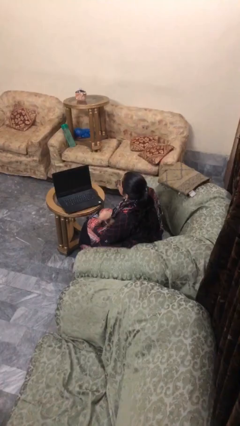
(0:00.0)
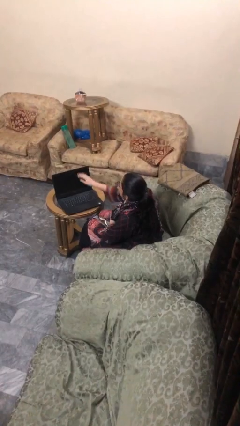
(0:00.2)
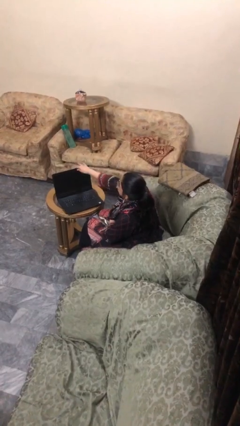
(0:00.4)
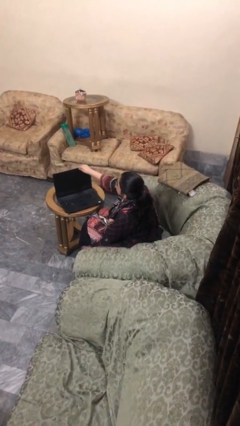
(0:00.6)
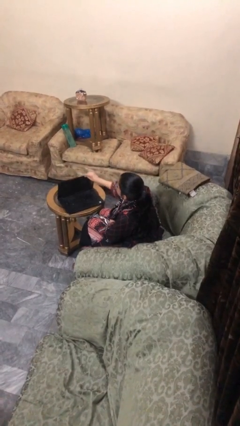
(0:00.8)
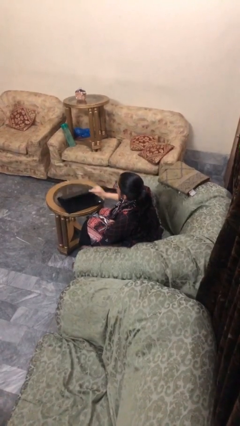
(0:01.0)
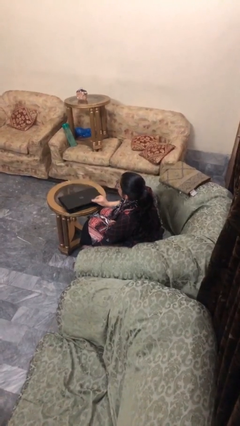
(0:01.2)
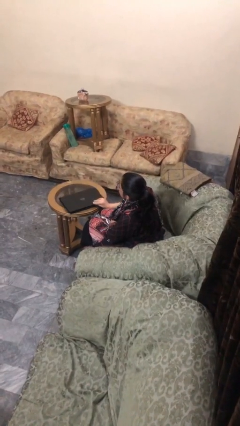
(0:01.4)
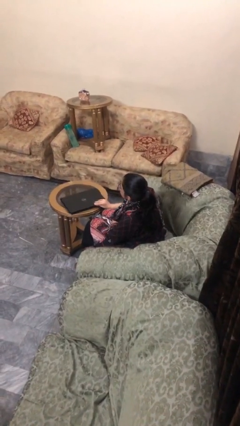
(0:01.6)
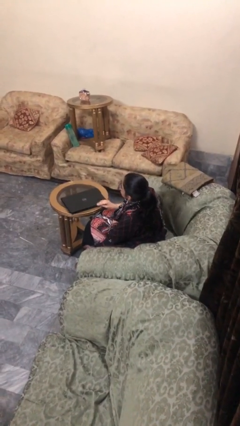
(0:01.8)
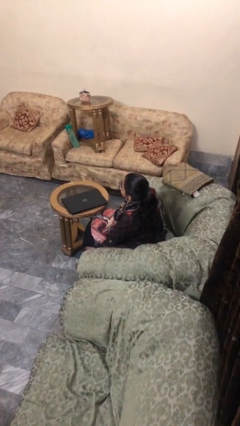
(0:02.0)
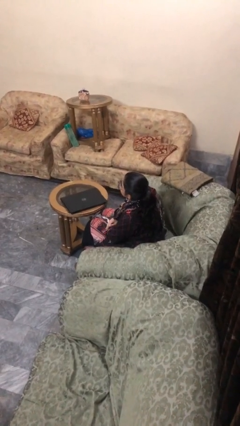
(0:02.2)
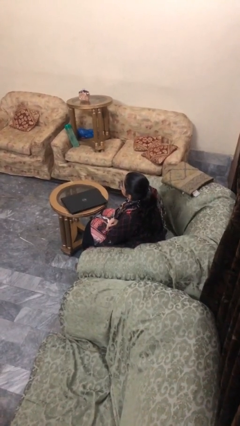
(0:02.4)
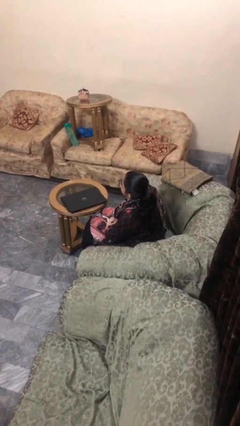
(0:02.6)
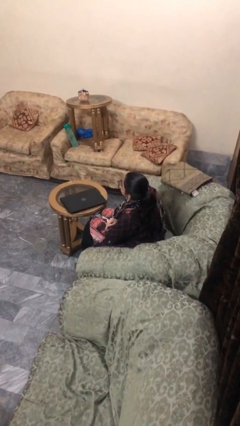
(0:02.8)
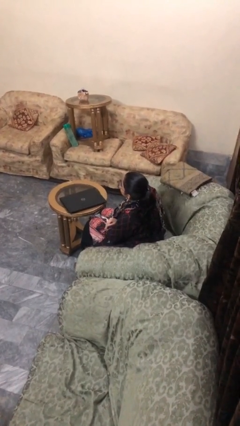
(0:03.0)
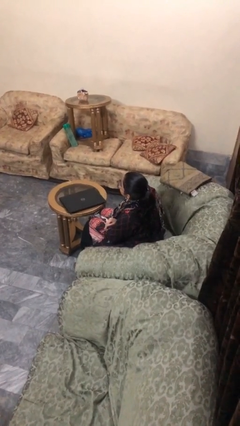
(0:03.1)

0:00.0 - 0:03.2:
person closes laptop

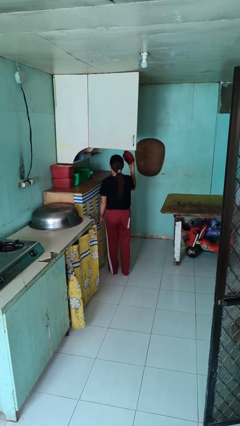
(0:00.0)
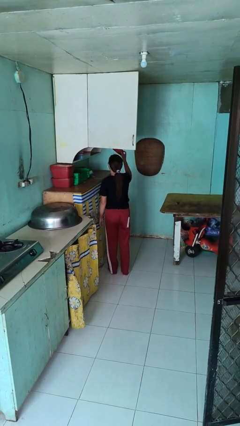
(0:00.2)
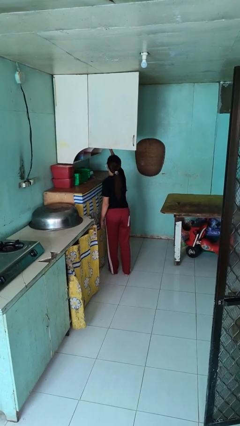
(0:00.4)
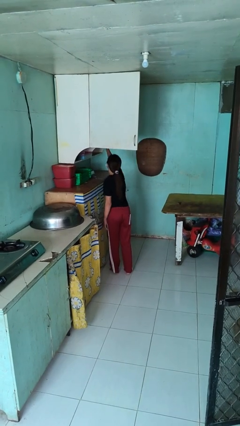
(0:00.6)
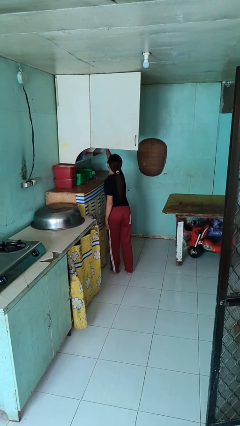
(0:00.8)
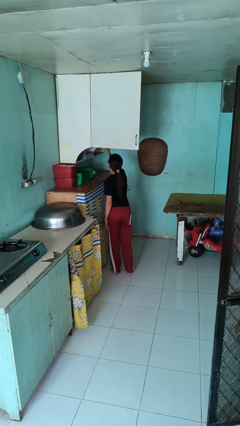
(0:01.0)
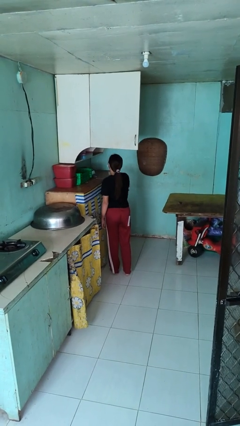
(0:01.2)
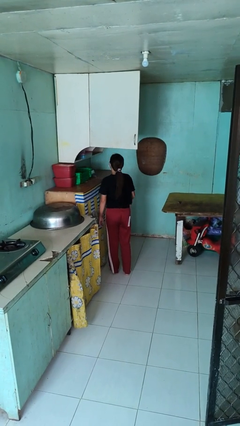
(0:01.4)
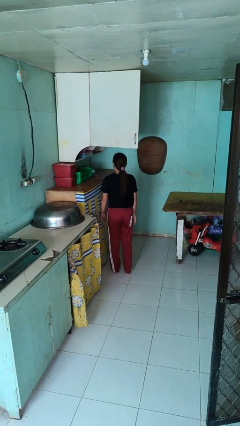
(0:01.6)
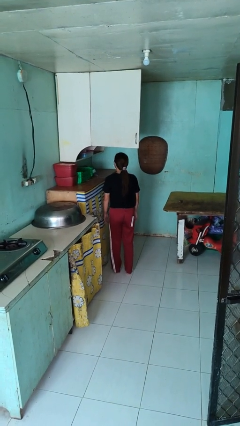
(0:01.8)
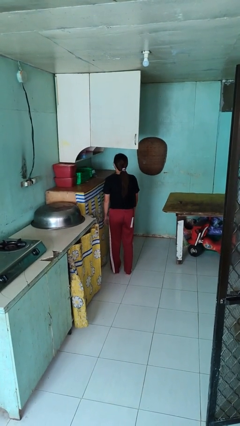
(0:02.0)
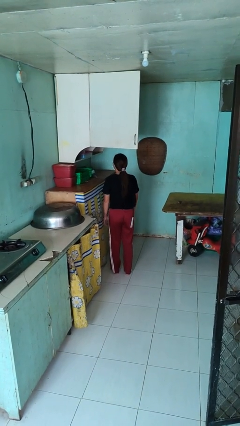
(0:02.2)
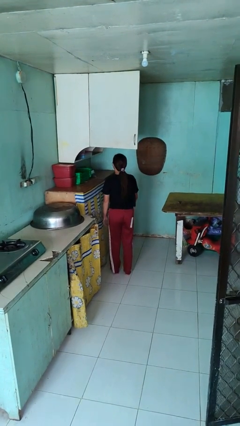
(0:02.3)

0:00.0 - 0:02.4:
person puts object in cabinet

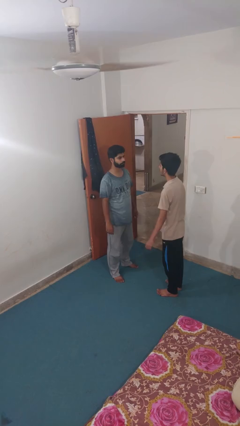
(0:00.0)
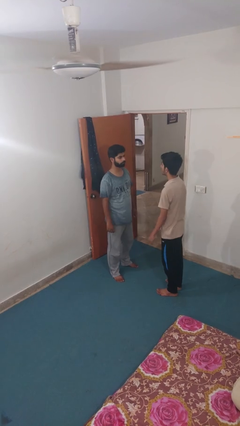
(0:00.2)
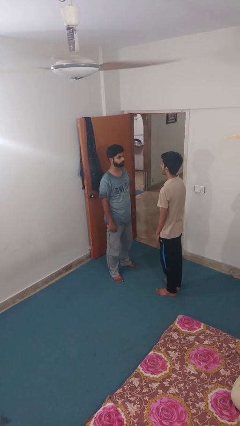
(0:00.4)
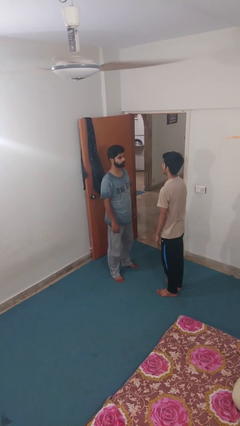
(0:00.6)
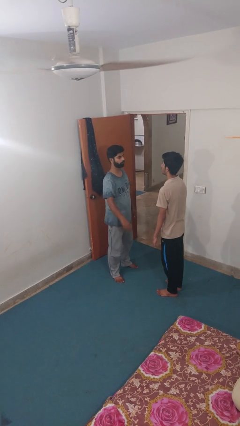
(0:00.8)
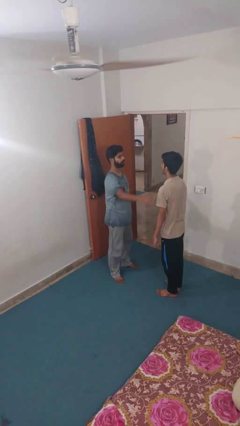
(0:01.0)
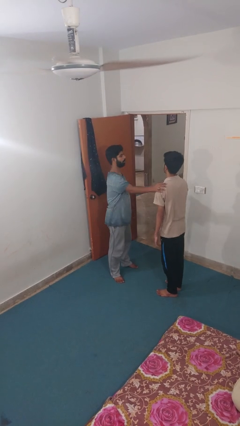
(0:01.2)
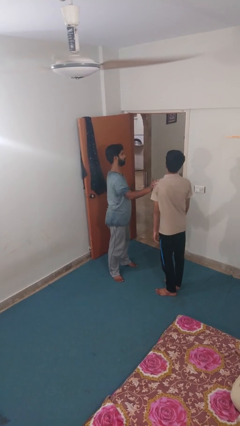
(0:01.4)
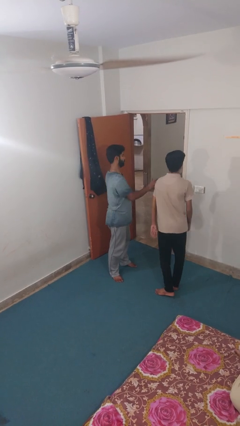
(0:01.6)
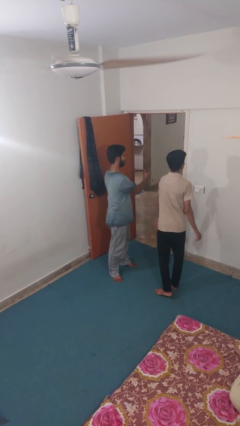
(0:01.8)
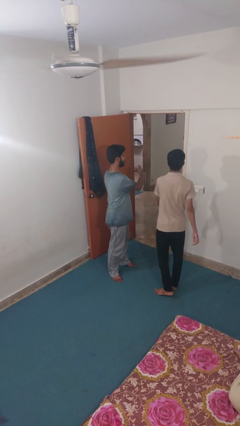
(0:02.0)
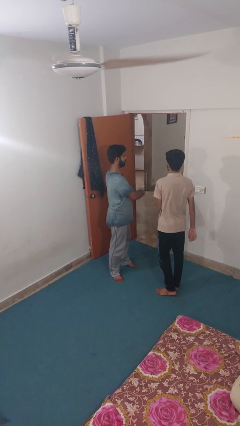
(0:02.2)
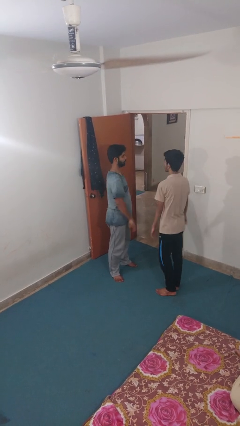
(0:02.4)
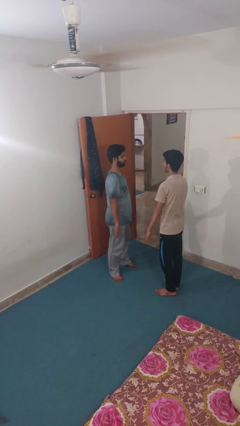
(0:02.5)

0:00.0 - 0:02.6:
person shoves person

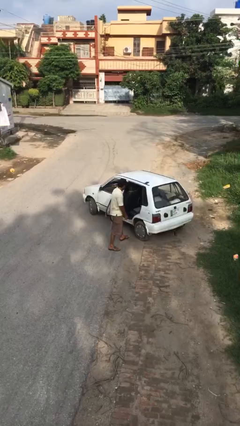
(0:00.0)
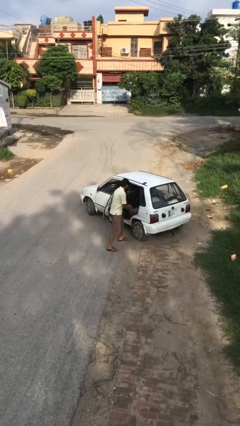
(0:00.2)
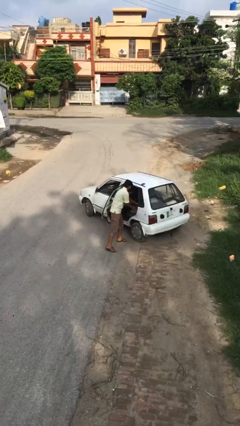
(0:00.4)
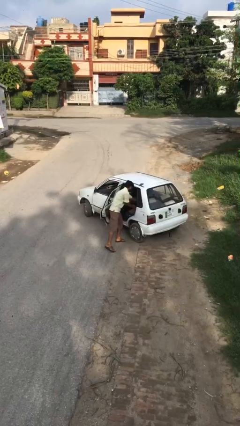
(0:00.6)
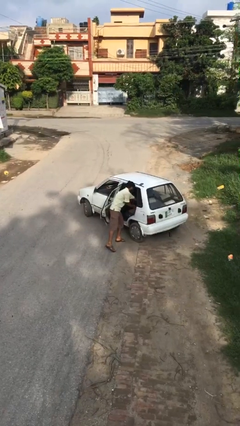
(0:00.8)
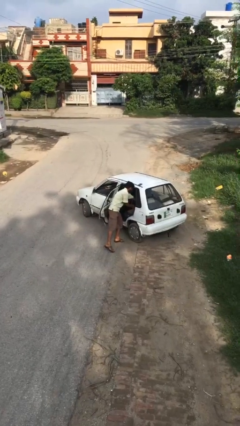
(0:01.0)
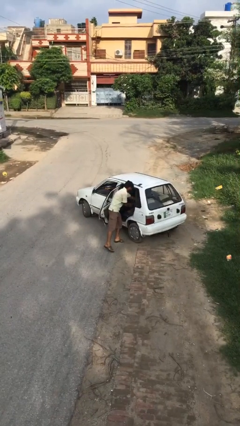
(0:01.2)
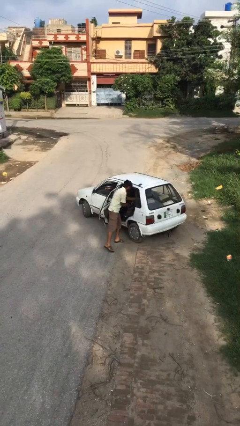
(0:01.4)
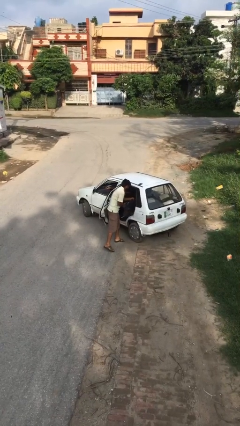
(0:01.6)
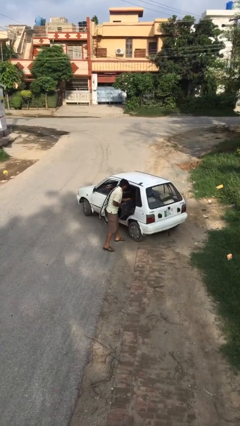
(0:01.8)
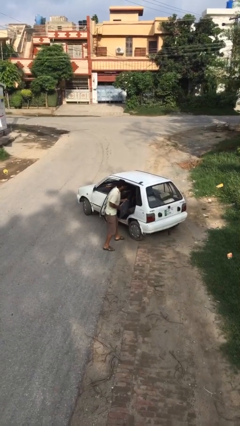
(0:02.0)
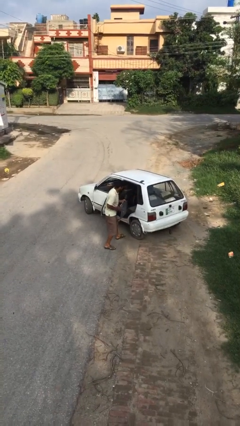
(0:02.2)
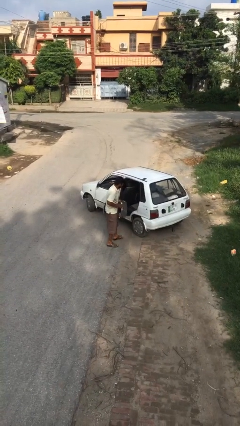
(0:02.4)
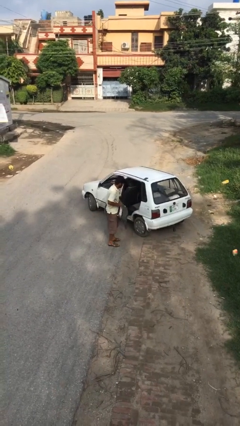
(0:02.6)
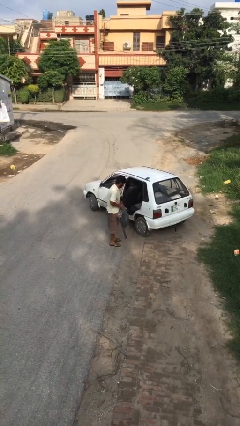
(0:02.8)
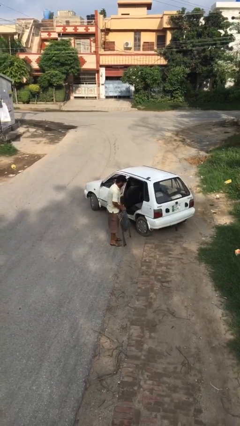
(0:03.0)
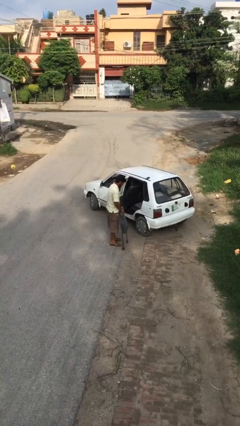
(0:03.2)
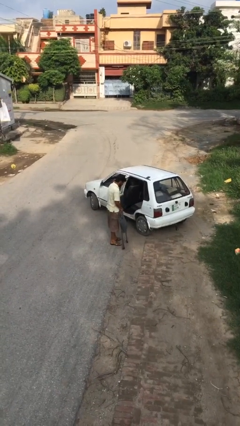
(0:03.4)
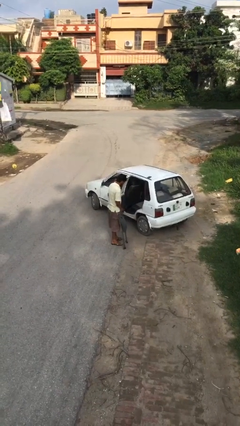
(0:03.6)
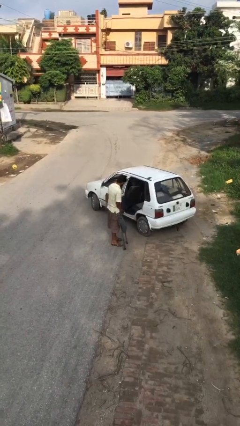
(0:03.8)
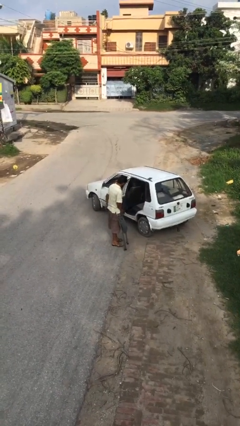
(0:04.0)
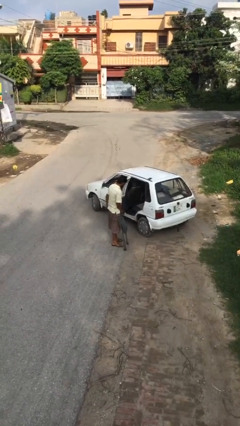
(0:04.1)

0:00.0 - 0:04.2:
person unloads car

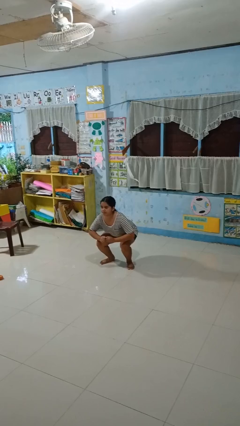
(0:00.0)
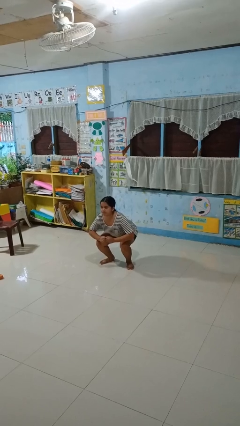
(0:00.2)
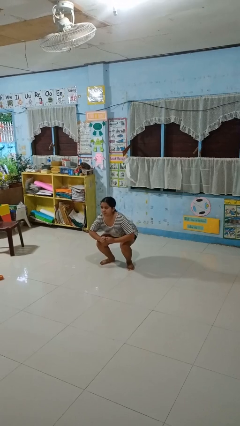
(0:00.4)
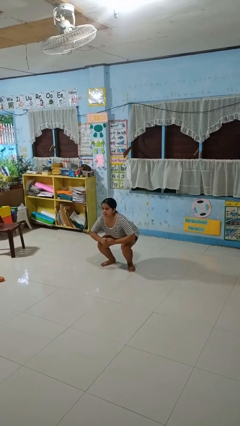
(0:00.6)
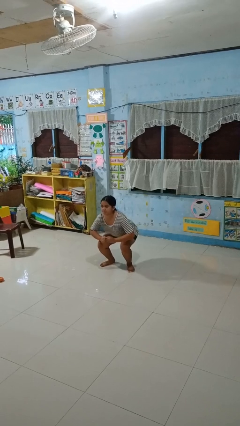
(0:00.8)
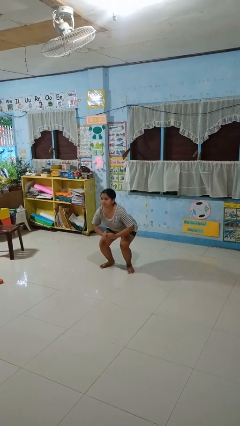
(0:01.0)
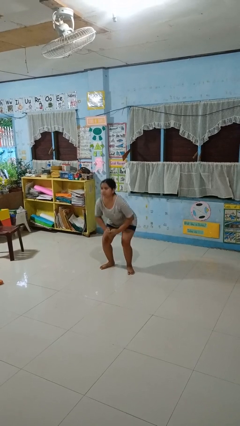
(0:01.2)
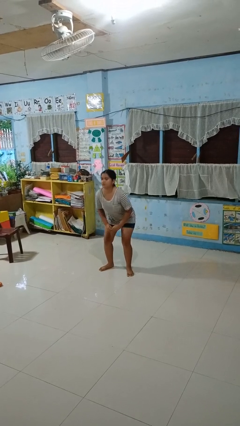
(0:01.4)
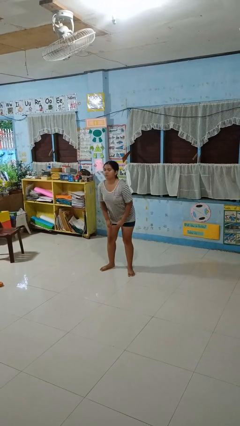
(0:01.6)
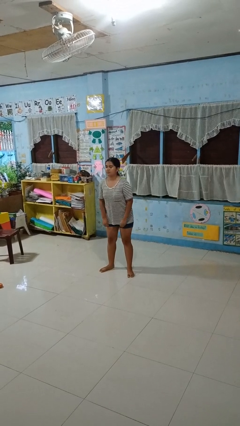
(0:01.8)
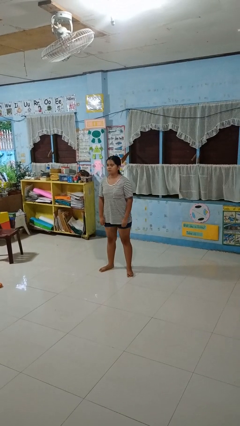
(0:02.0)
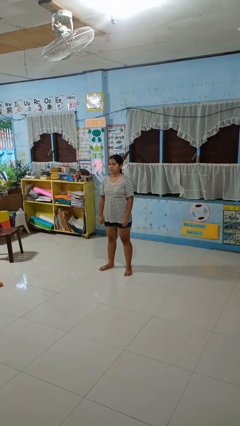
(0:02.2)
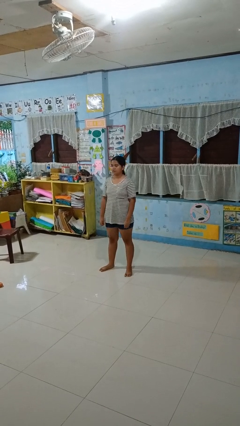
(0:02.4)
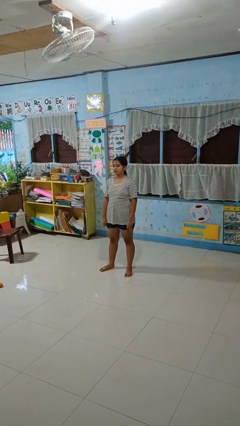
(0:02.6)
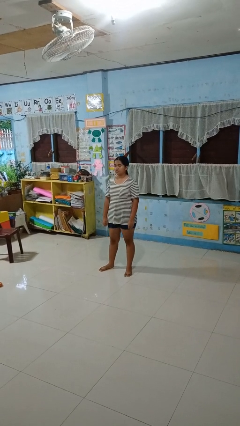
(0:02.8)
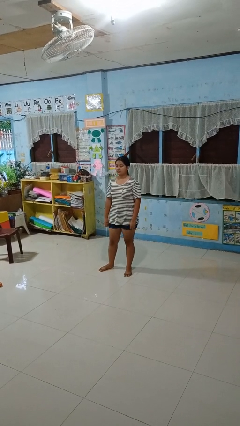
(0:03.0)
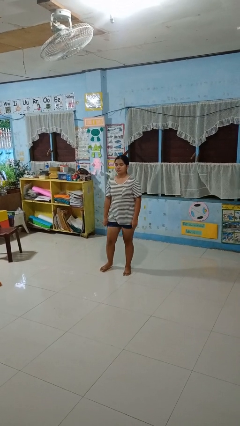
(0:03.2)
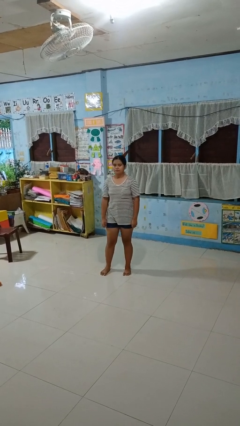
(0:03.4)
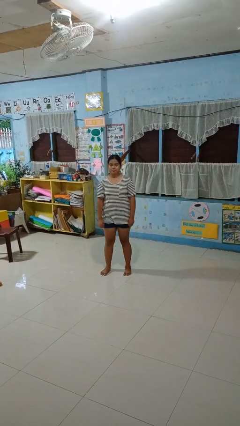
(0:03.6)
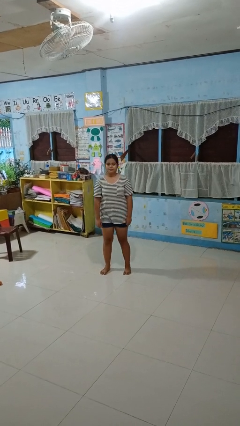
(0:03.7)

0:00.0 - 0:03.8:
person stands up

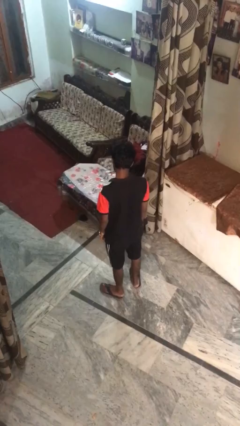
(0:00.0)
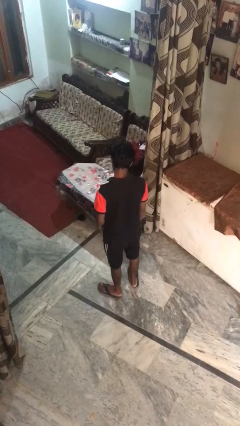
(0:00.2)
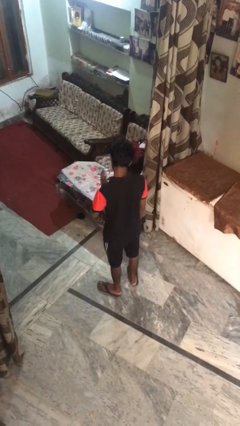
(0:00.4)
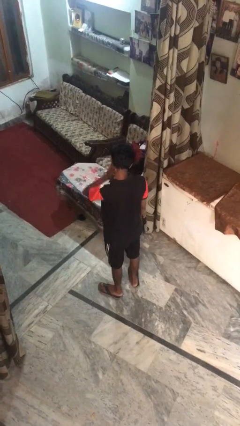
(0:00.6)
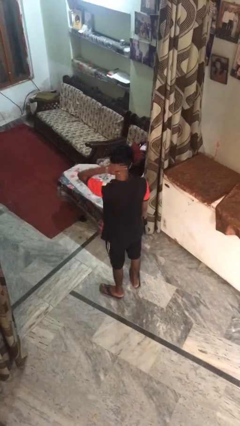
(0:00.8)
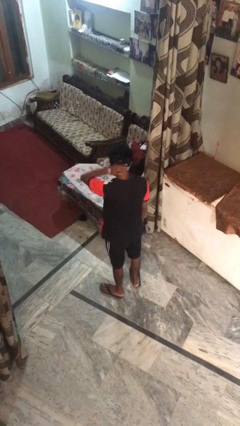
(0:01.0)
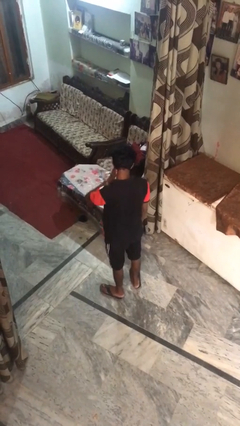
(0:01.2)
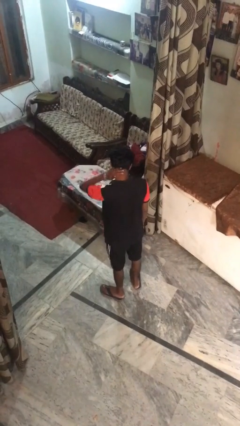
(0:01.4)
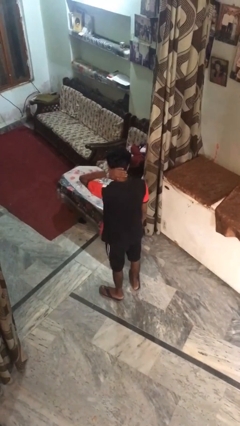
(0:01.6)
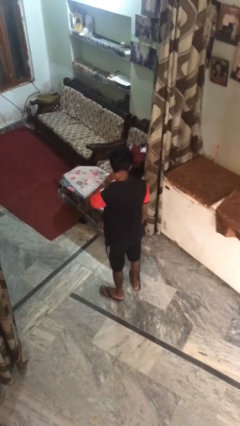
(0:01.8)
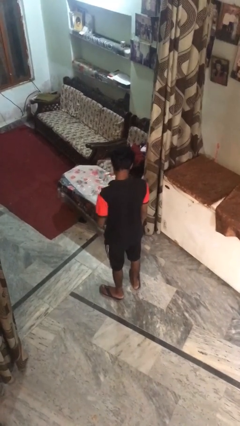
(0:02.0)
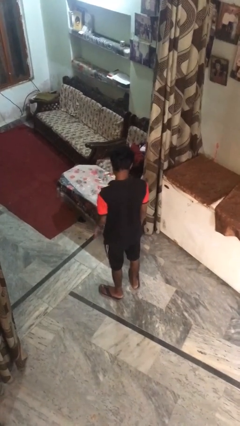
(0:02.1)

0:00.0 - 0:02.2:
person rubs neck
